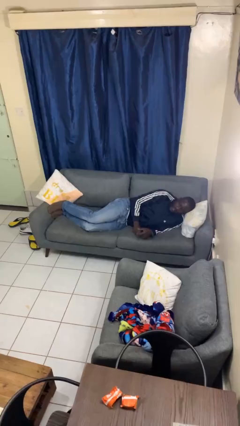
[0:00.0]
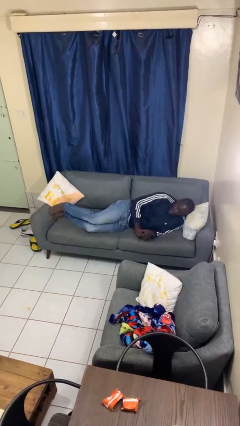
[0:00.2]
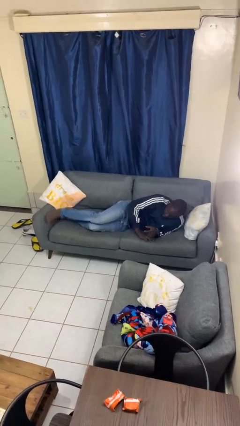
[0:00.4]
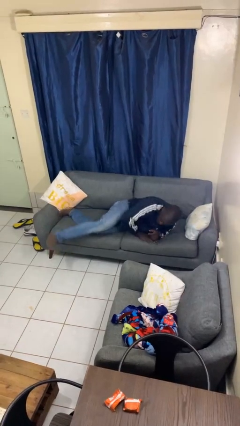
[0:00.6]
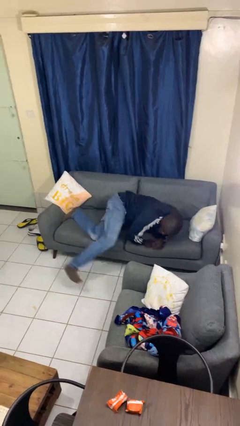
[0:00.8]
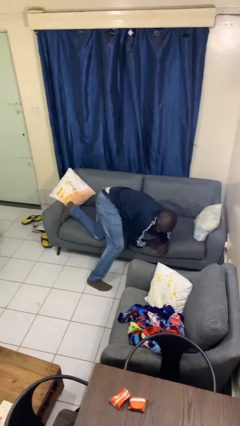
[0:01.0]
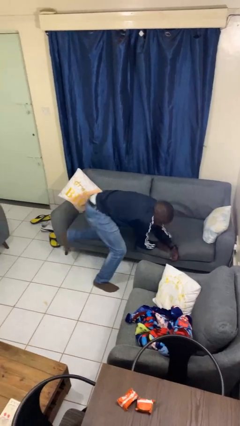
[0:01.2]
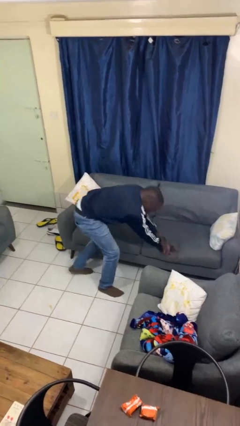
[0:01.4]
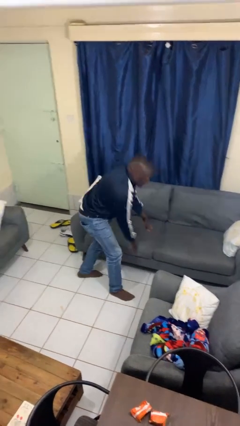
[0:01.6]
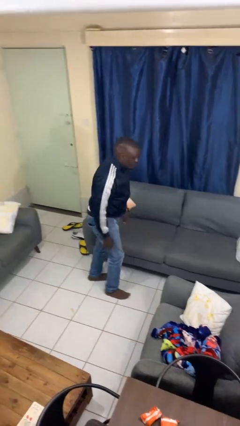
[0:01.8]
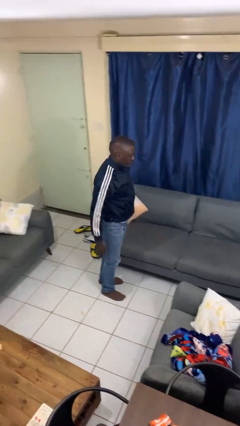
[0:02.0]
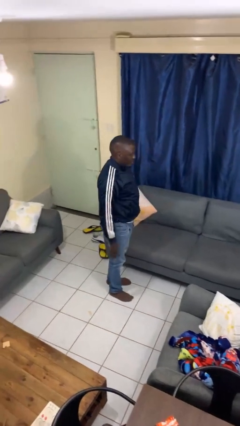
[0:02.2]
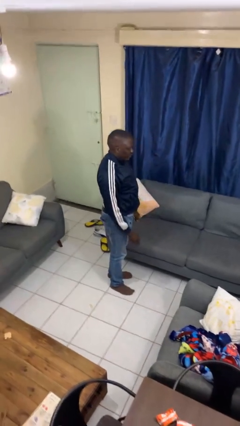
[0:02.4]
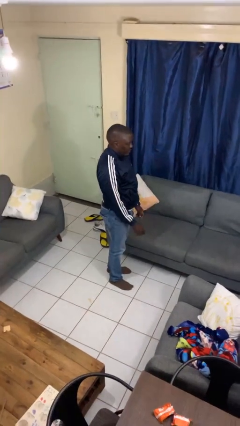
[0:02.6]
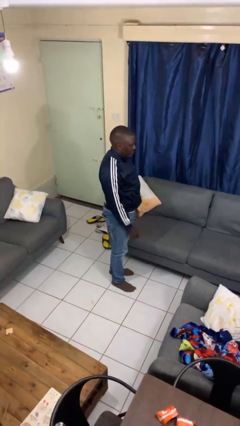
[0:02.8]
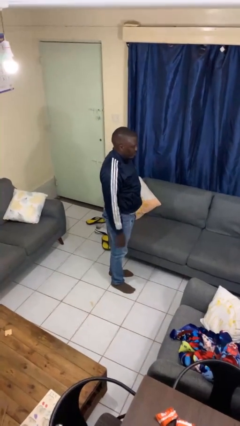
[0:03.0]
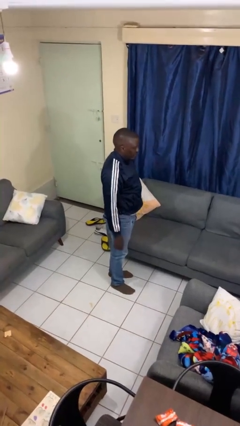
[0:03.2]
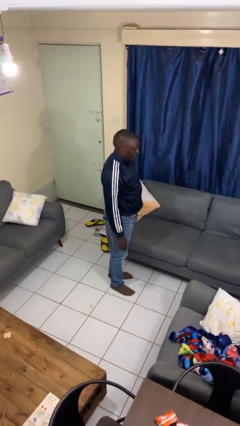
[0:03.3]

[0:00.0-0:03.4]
person stands up

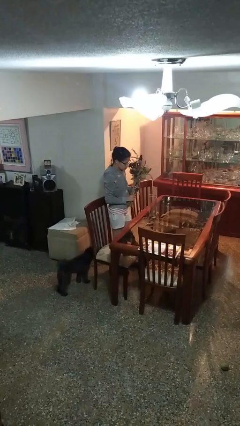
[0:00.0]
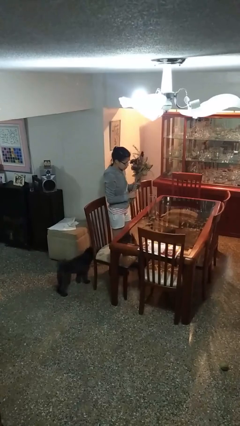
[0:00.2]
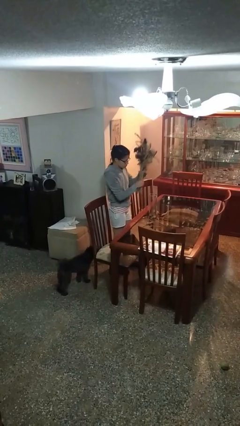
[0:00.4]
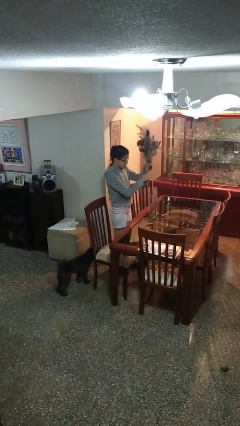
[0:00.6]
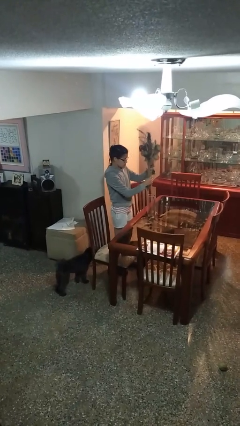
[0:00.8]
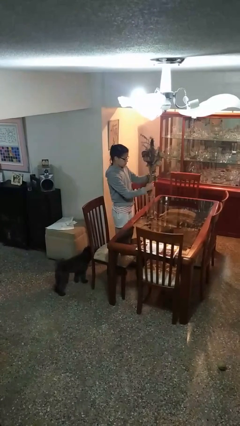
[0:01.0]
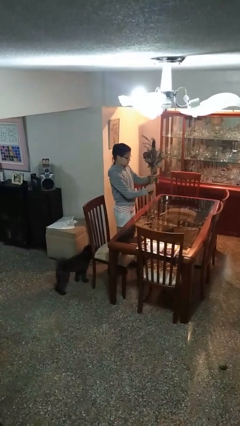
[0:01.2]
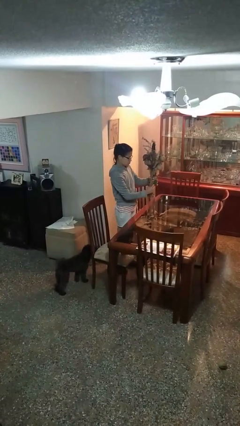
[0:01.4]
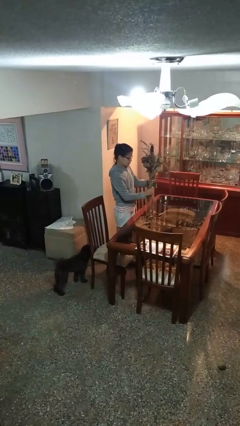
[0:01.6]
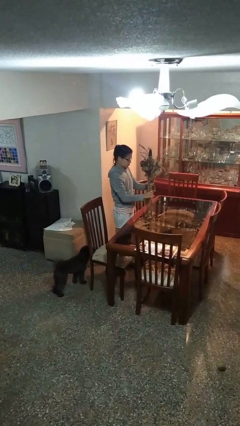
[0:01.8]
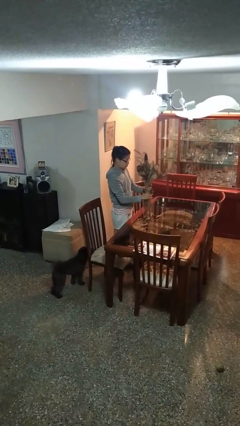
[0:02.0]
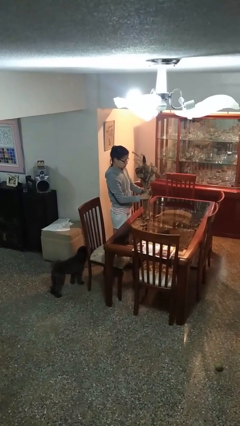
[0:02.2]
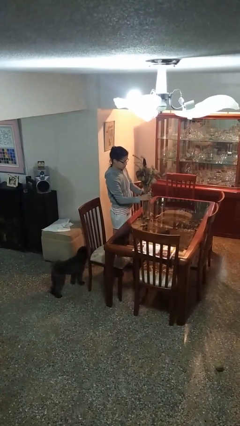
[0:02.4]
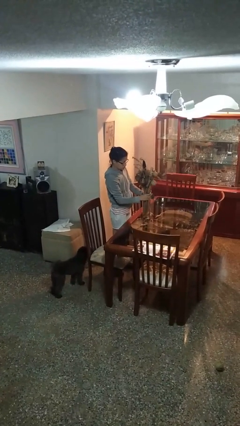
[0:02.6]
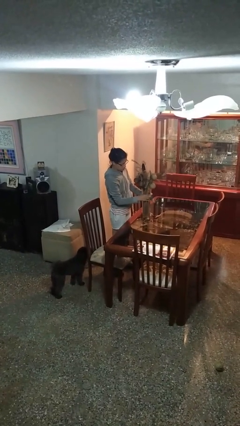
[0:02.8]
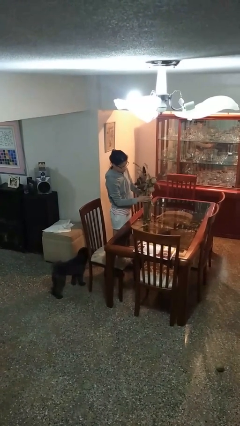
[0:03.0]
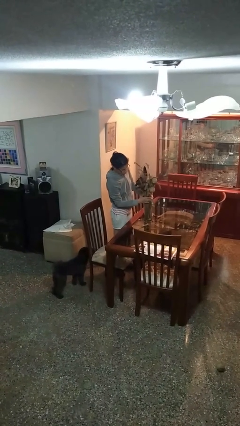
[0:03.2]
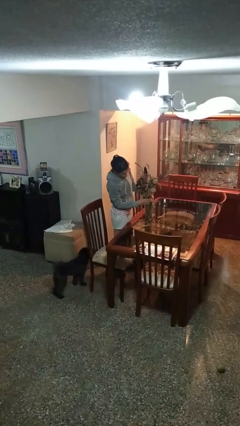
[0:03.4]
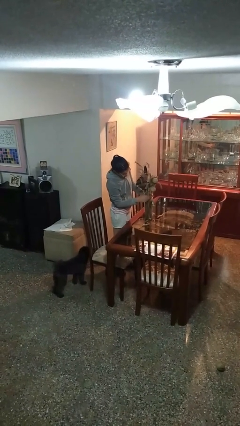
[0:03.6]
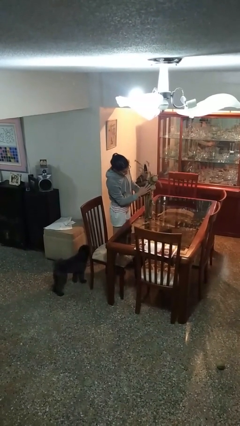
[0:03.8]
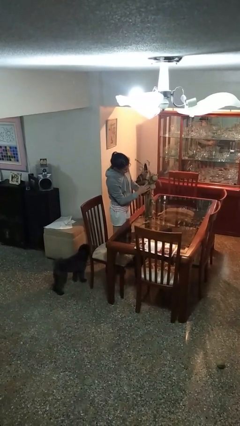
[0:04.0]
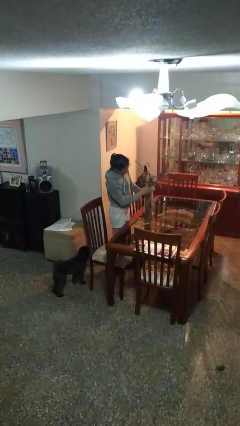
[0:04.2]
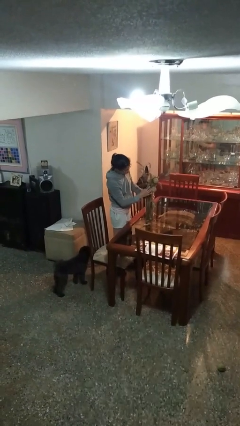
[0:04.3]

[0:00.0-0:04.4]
person arranges flowers in vase

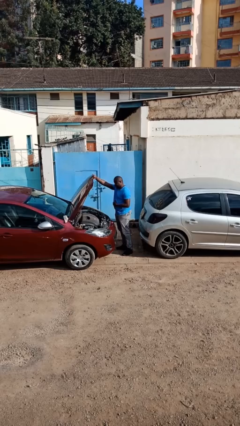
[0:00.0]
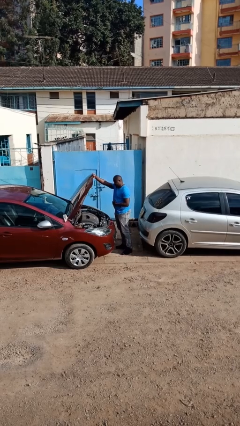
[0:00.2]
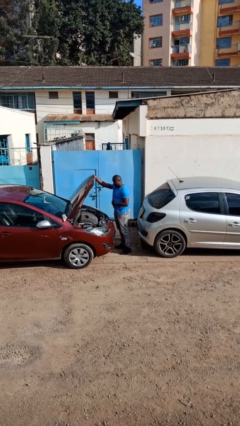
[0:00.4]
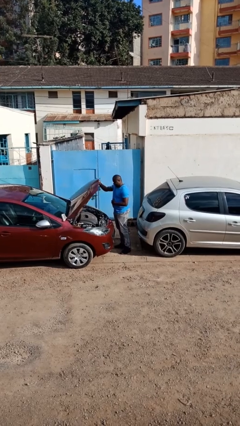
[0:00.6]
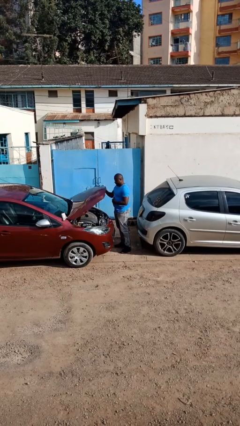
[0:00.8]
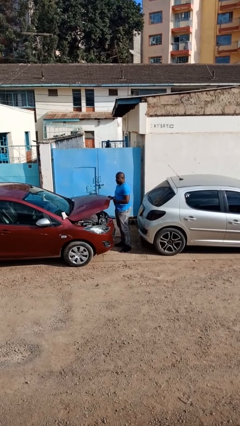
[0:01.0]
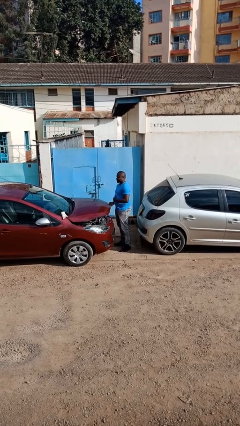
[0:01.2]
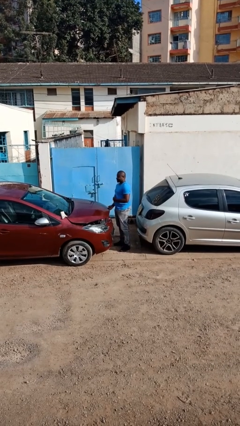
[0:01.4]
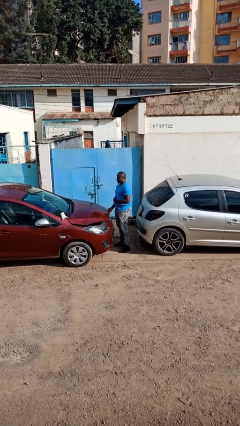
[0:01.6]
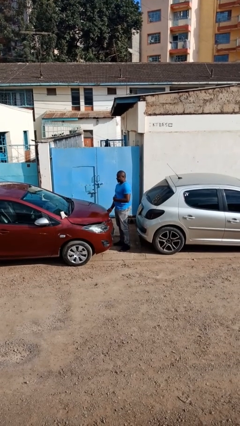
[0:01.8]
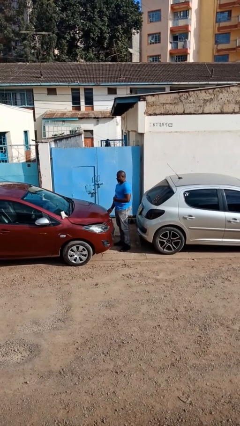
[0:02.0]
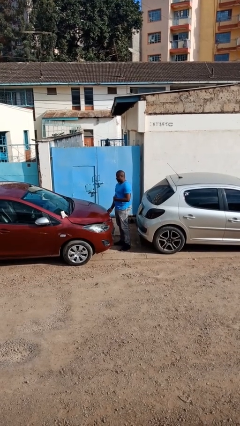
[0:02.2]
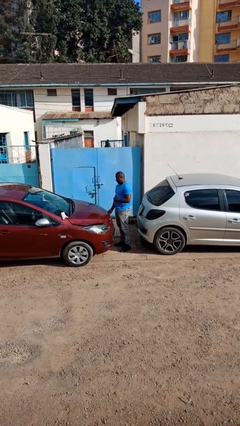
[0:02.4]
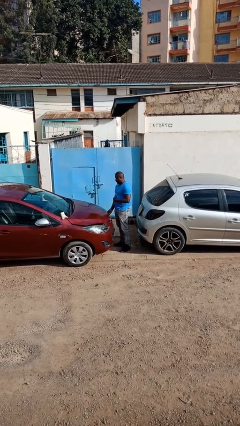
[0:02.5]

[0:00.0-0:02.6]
person closes car hood

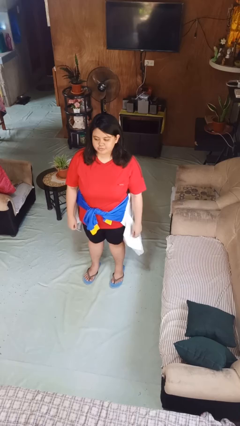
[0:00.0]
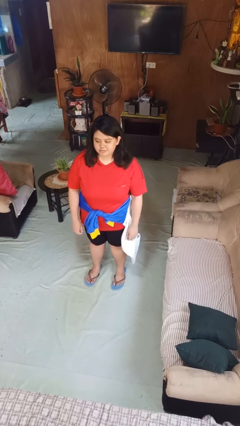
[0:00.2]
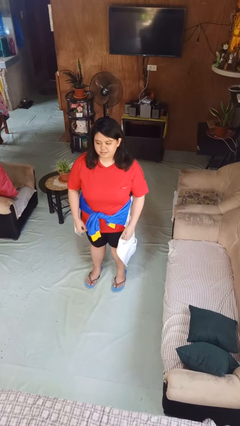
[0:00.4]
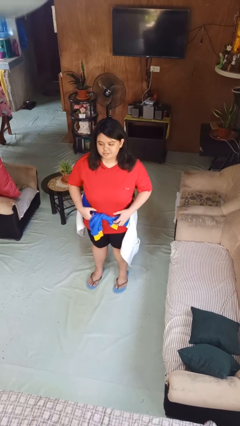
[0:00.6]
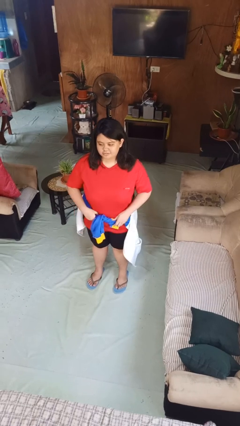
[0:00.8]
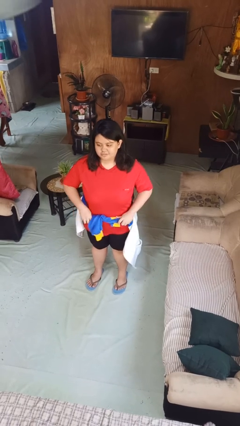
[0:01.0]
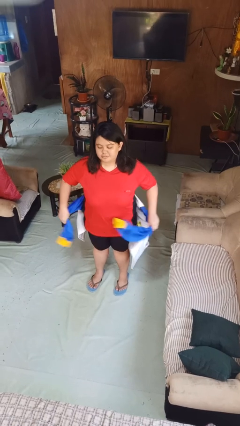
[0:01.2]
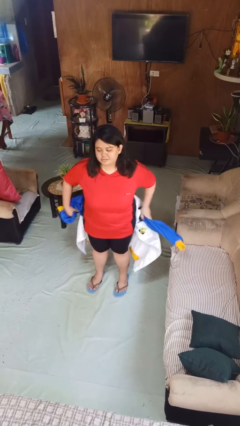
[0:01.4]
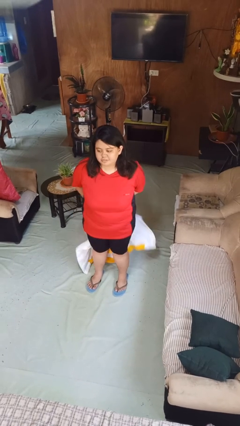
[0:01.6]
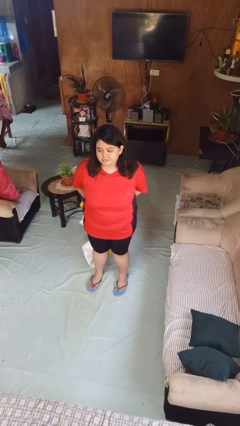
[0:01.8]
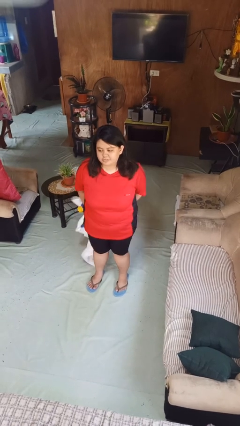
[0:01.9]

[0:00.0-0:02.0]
person unties jacket around waist

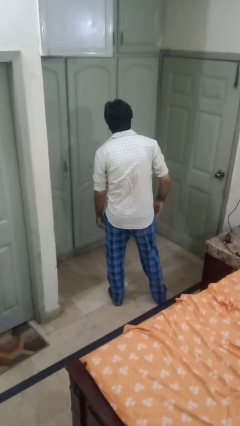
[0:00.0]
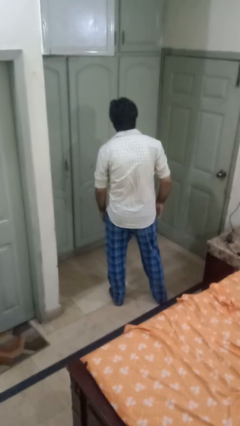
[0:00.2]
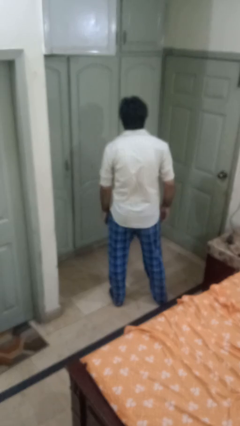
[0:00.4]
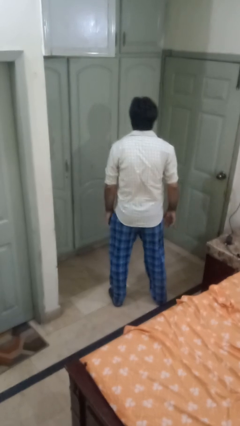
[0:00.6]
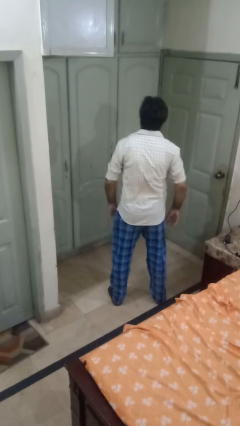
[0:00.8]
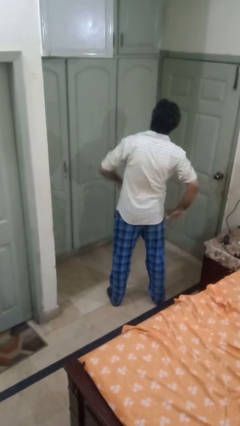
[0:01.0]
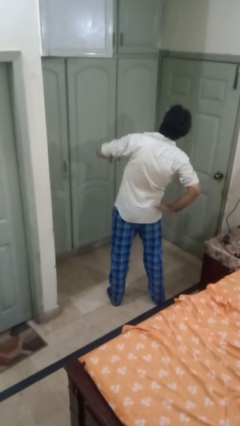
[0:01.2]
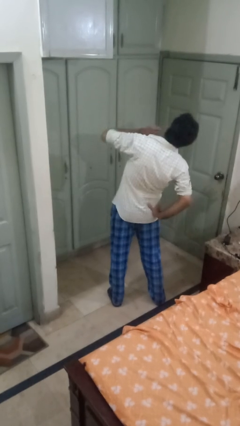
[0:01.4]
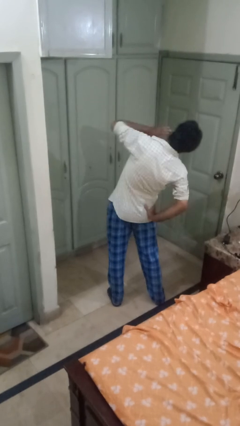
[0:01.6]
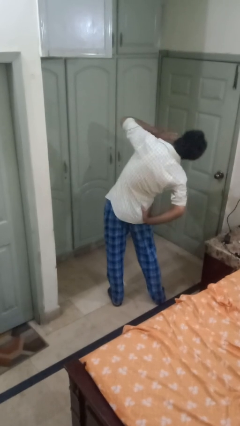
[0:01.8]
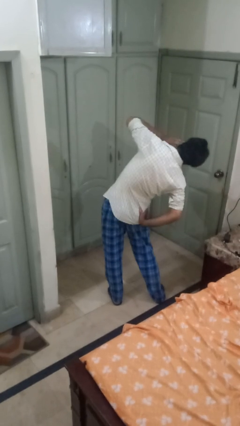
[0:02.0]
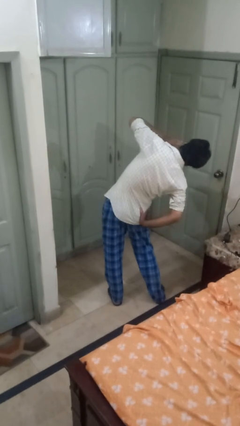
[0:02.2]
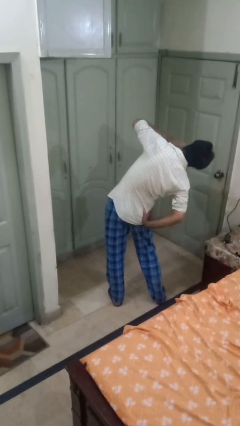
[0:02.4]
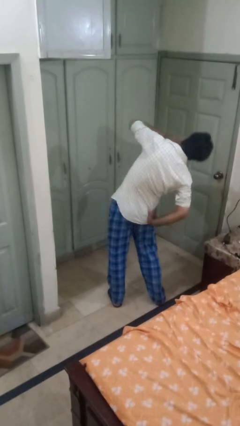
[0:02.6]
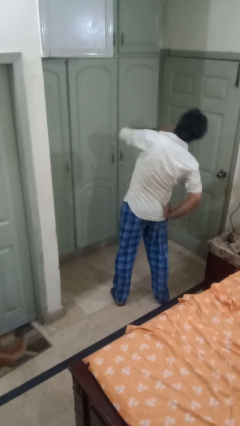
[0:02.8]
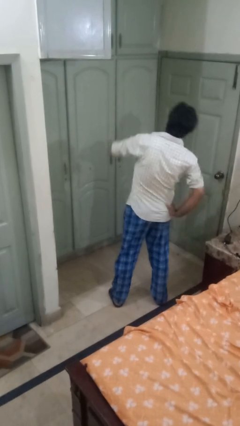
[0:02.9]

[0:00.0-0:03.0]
person stretches arms to side

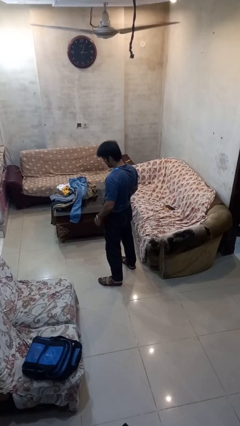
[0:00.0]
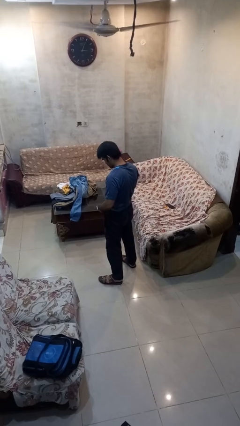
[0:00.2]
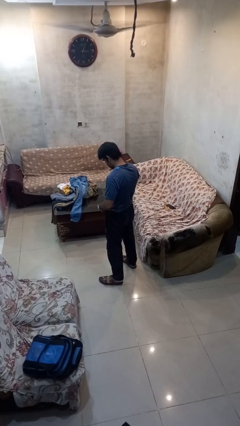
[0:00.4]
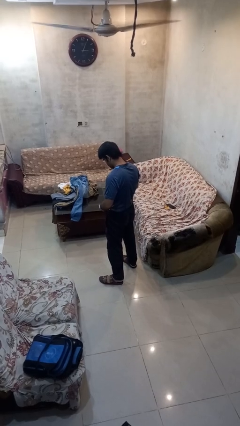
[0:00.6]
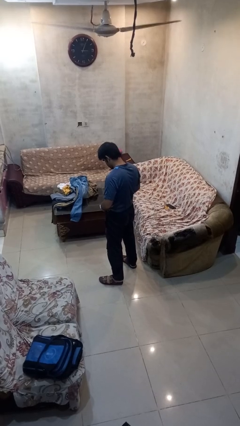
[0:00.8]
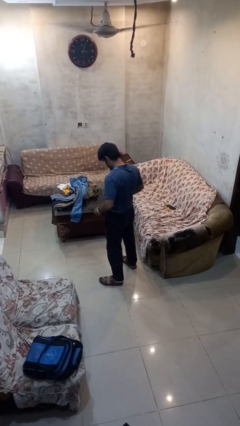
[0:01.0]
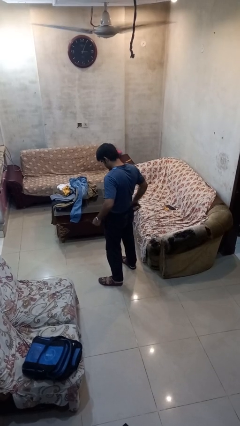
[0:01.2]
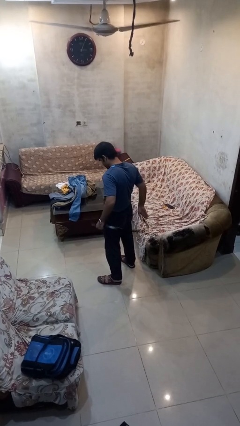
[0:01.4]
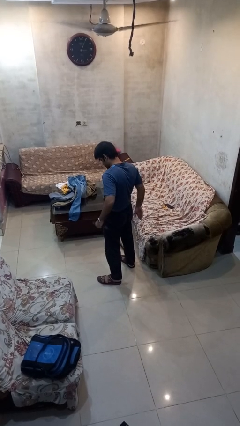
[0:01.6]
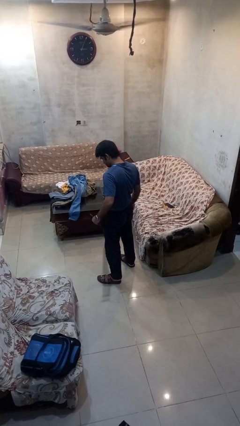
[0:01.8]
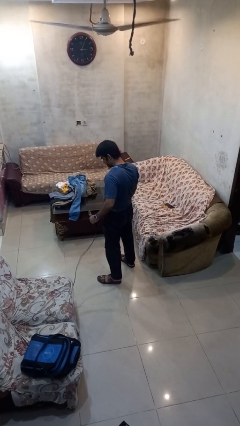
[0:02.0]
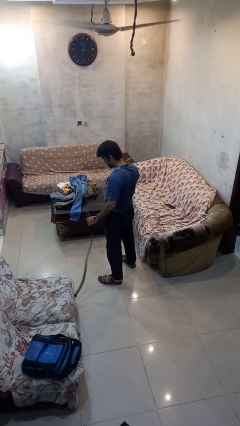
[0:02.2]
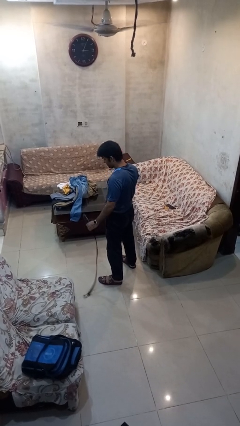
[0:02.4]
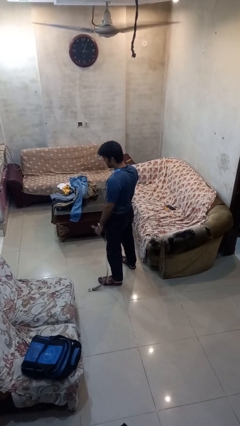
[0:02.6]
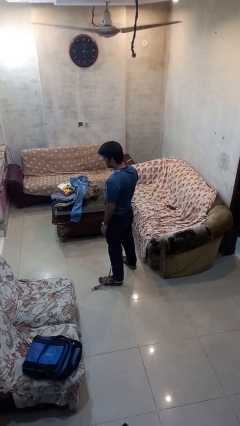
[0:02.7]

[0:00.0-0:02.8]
person takes off belt
